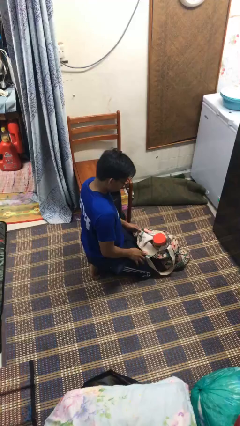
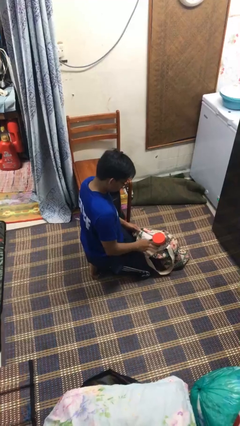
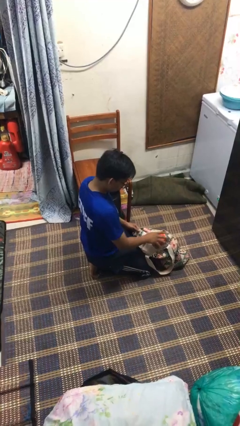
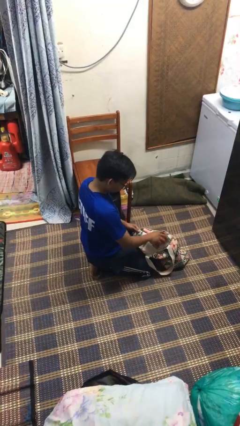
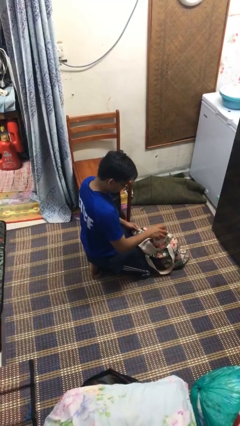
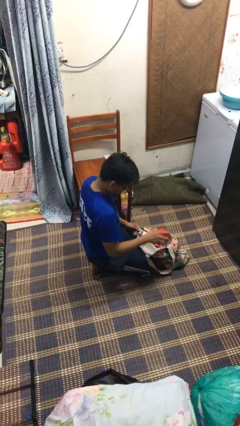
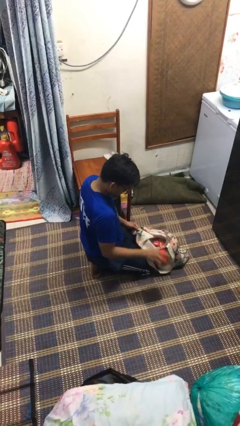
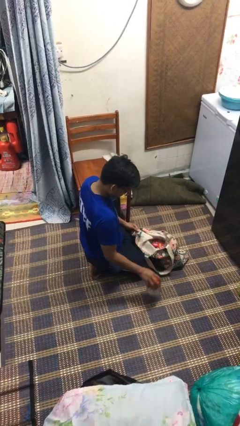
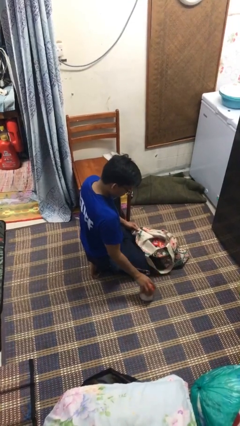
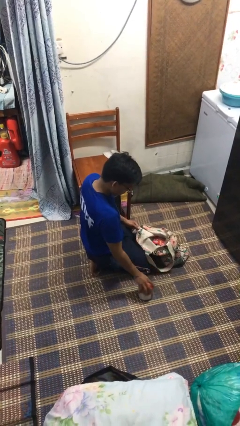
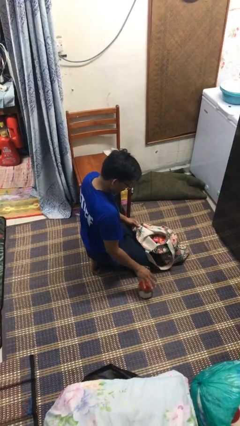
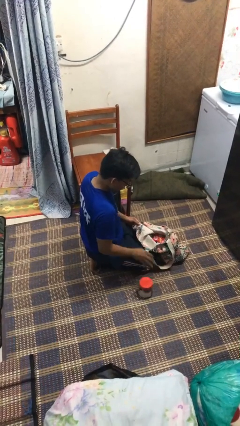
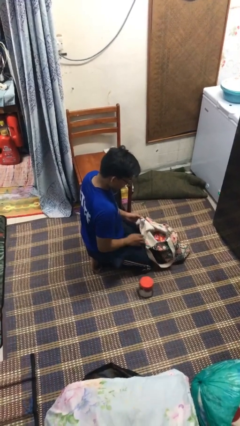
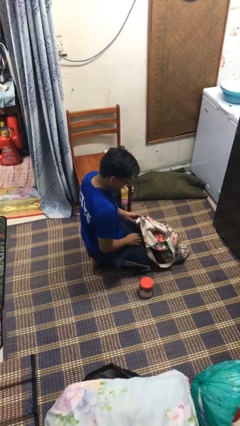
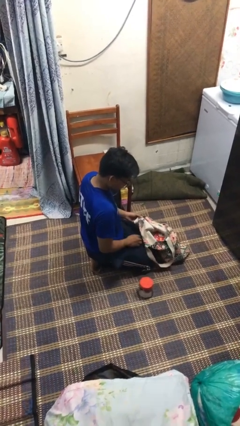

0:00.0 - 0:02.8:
person takes object from bag

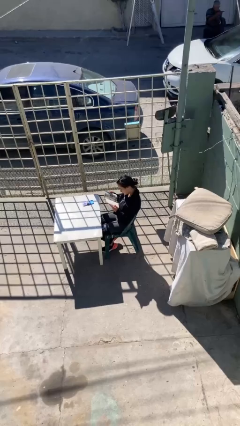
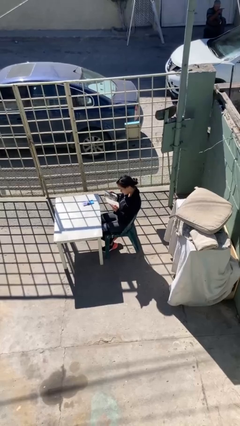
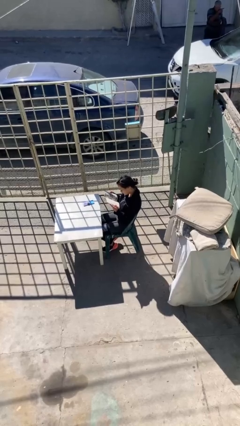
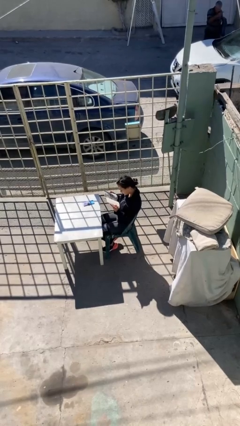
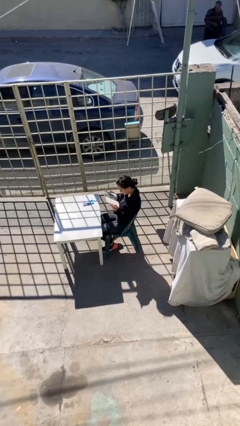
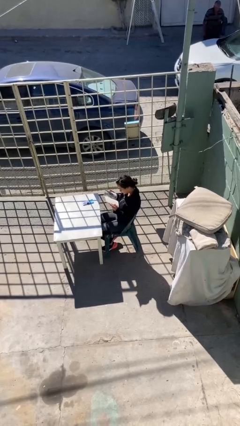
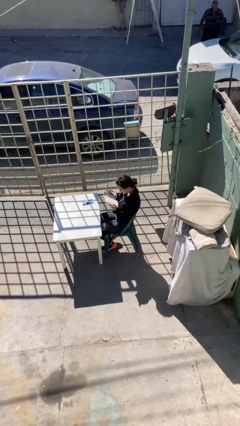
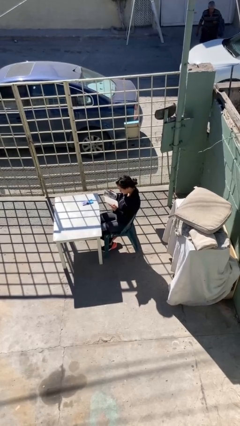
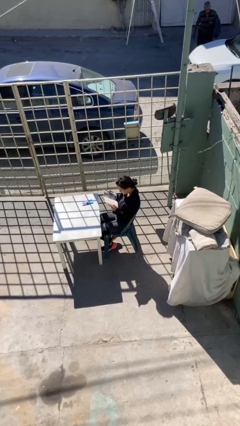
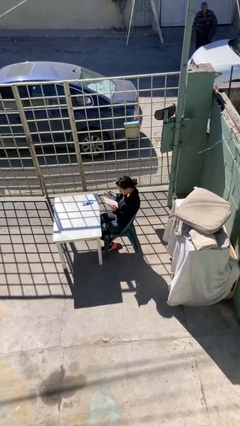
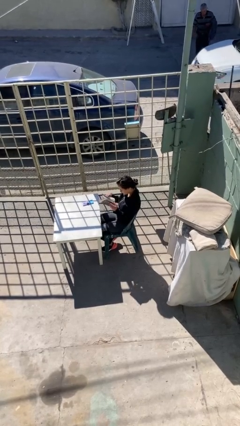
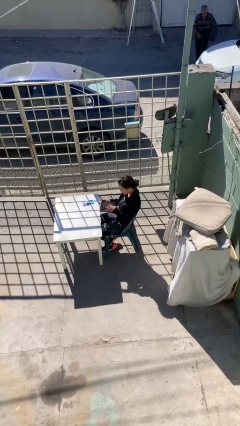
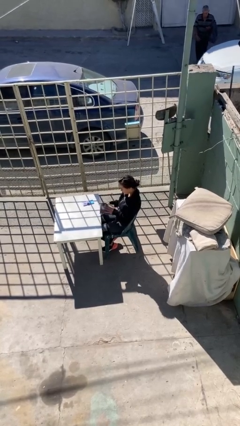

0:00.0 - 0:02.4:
person reads document

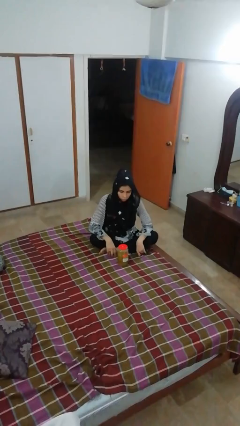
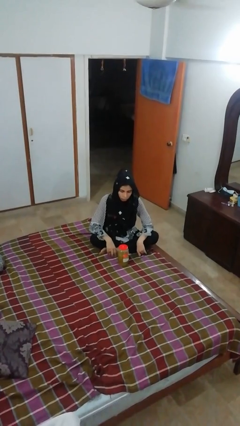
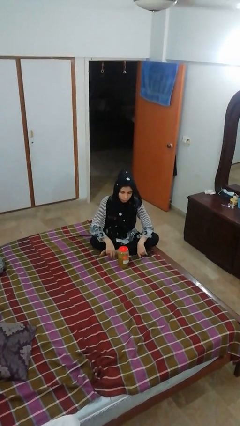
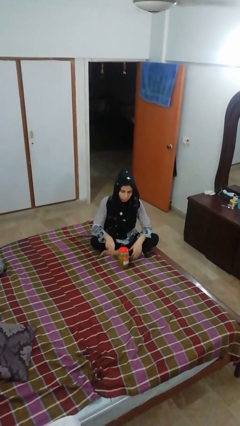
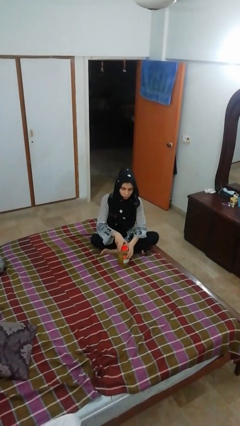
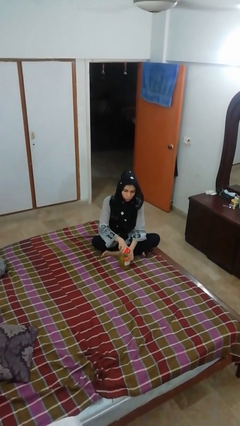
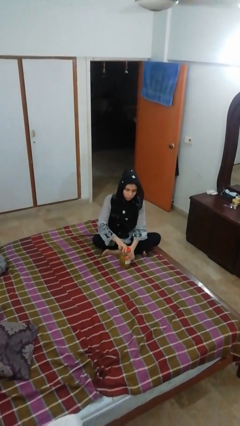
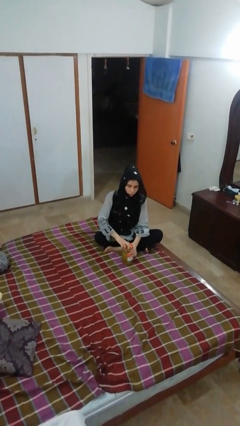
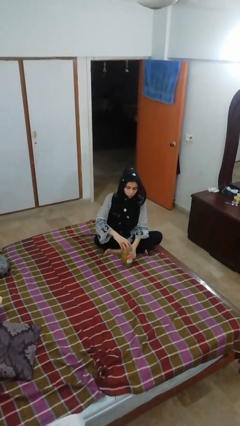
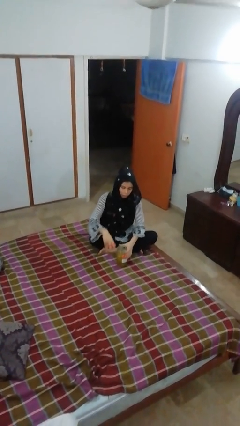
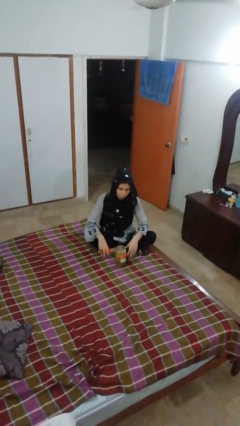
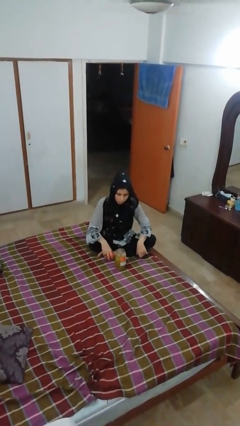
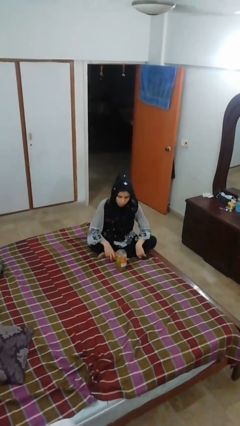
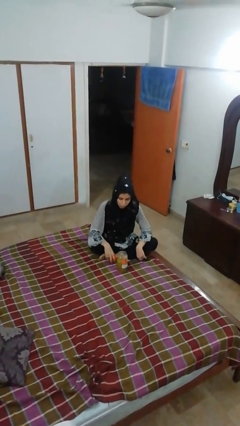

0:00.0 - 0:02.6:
person opens jar

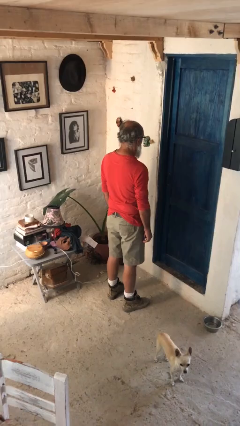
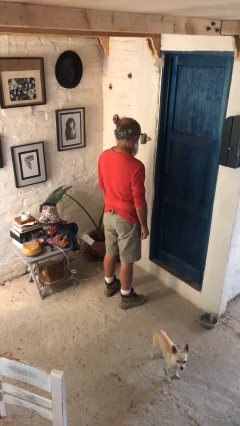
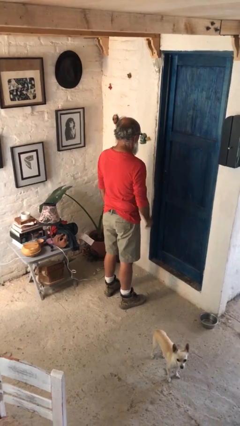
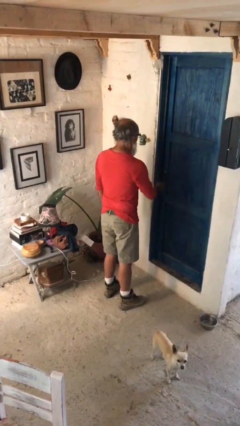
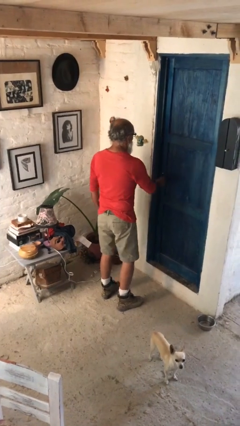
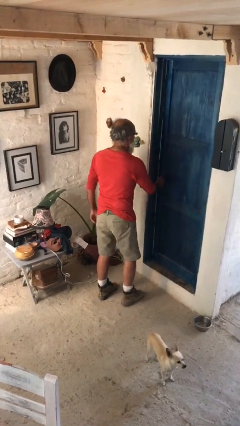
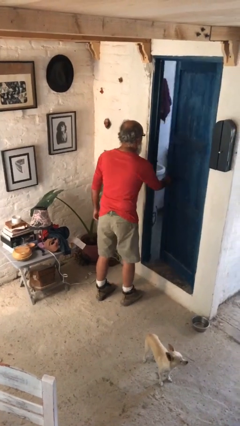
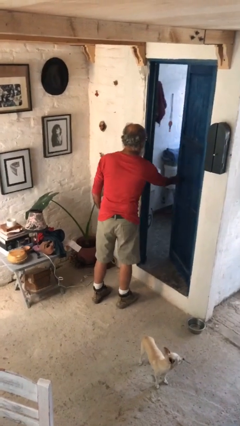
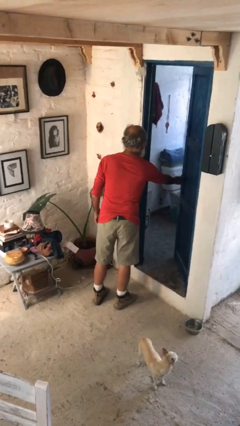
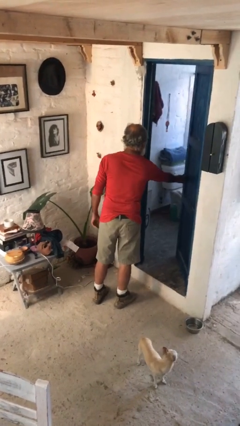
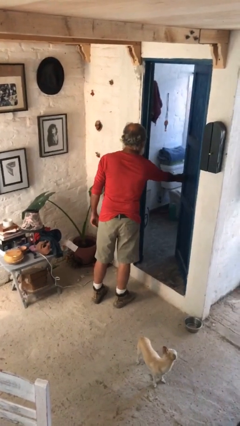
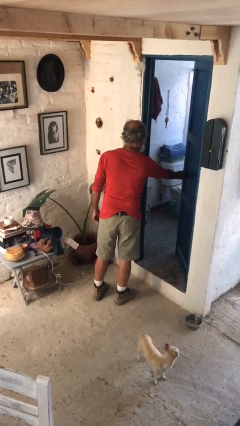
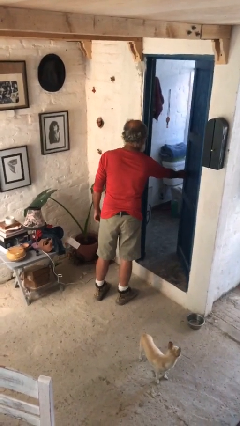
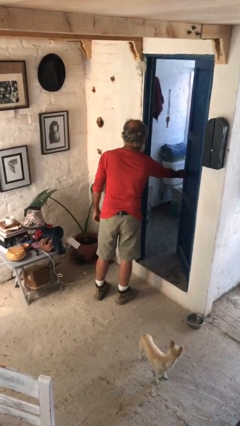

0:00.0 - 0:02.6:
person opens facility door

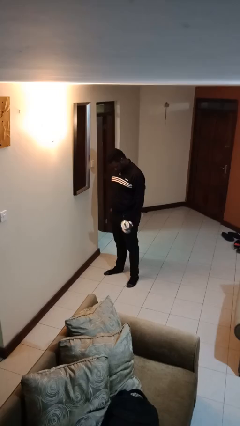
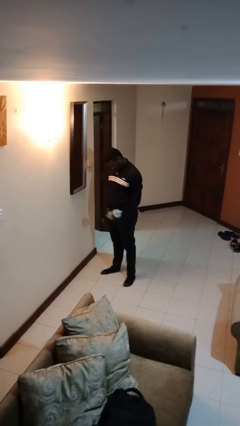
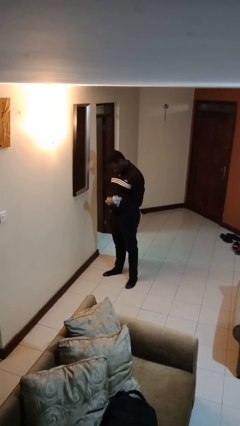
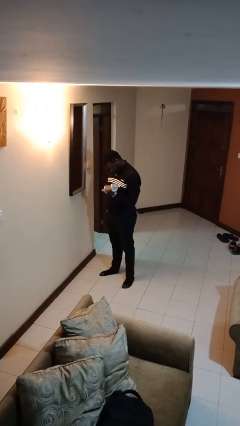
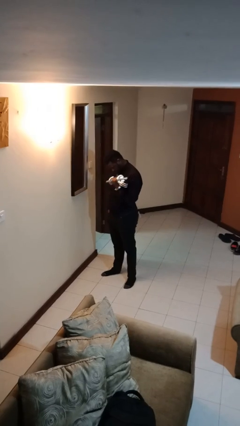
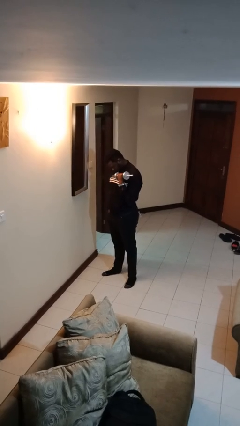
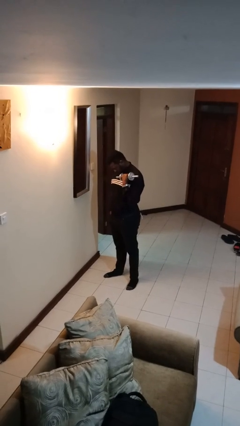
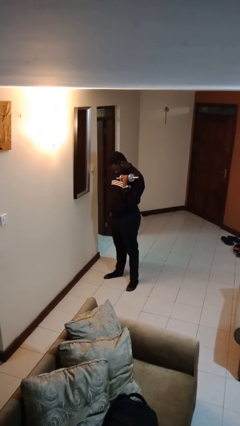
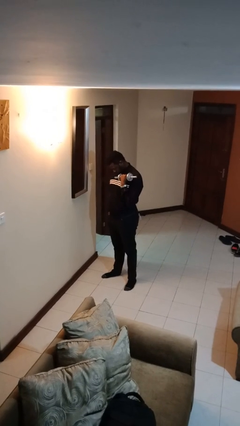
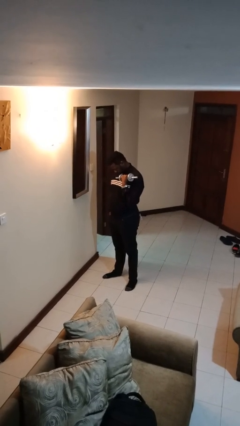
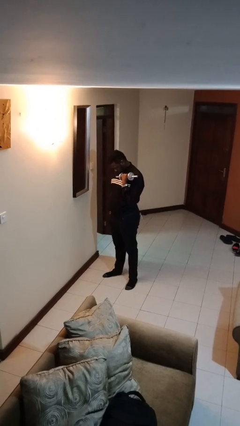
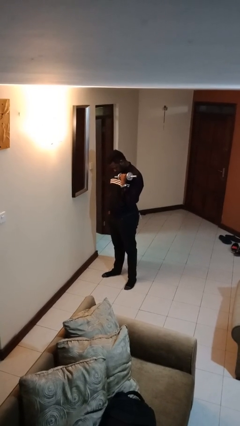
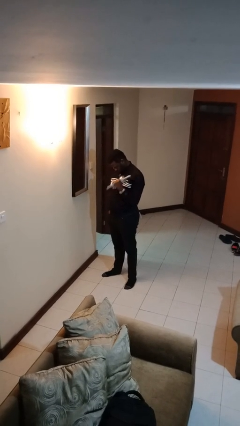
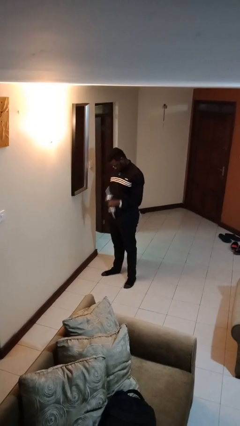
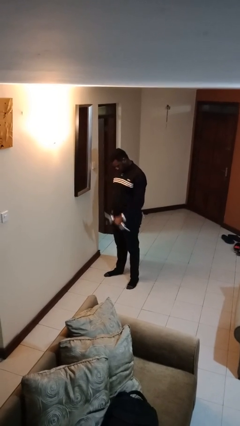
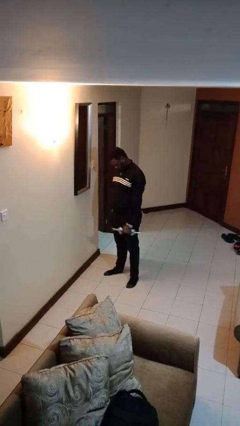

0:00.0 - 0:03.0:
person lifts dumbbells

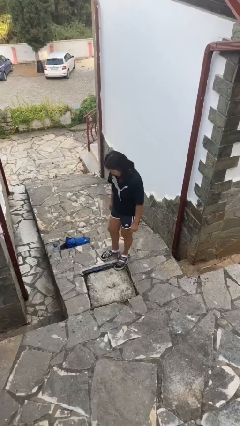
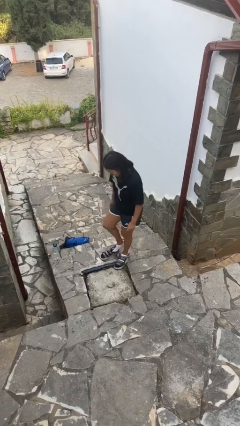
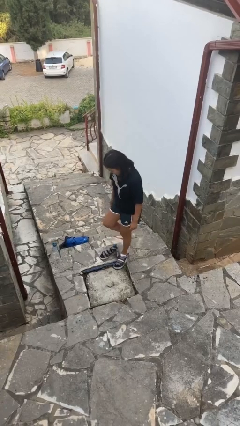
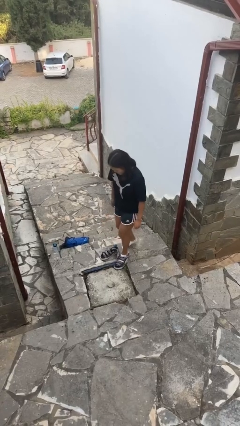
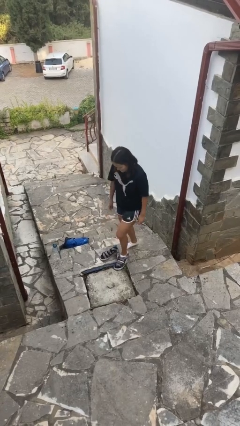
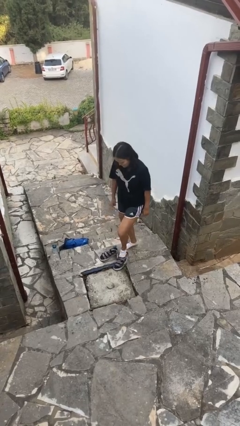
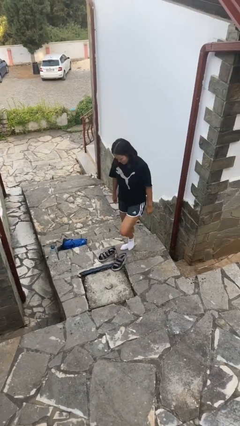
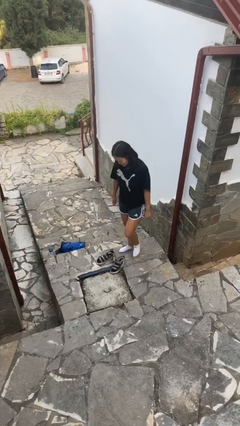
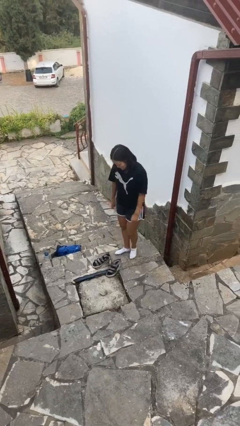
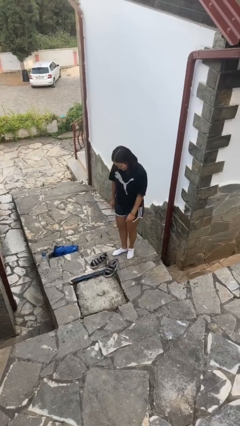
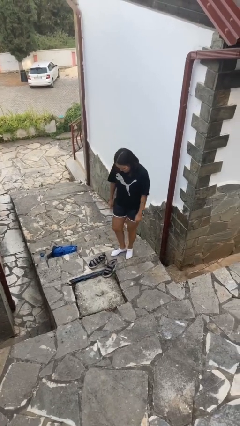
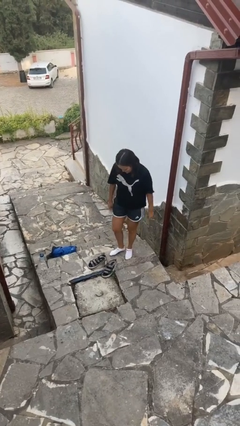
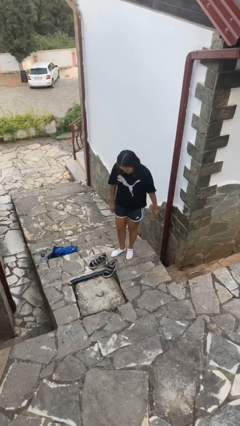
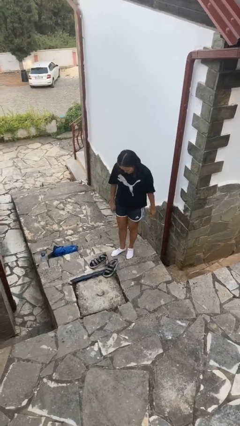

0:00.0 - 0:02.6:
person takes off shoes

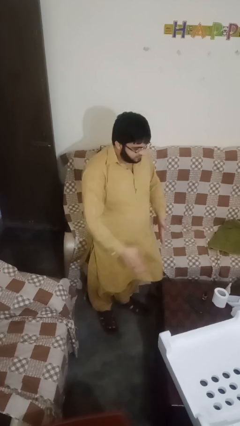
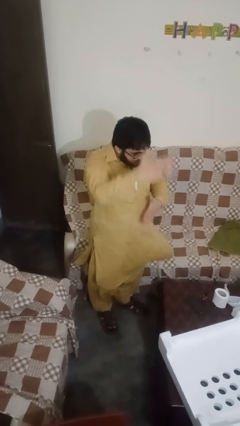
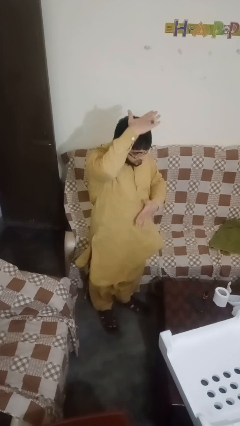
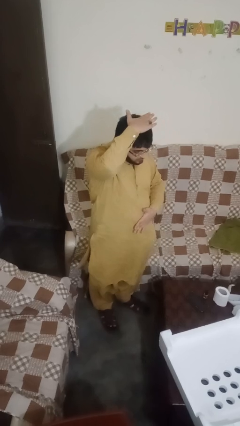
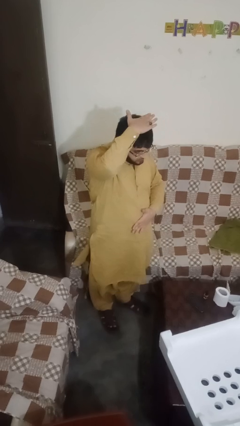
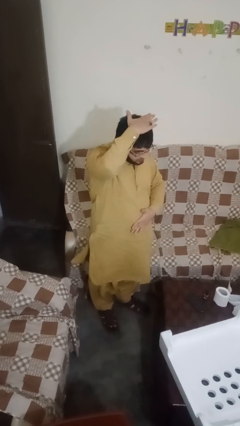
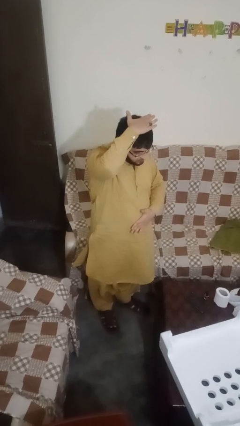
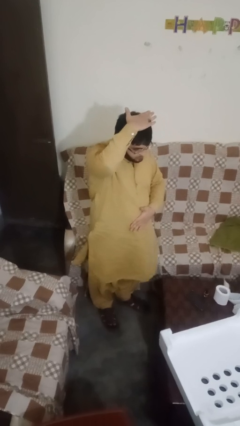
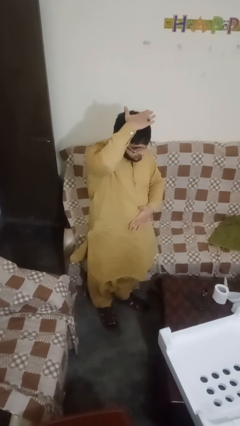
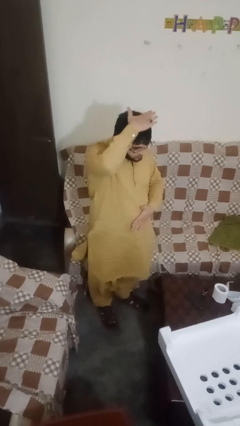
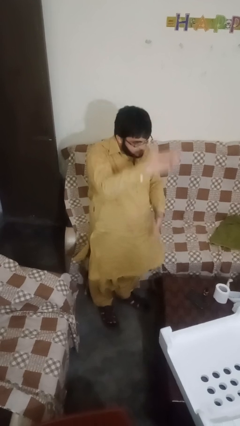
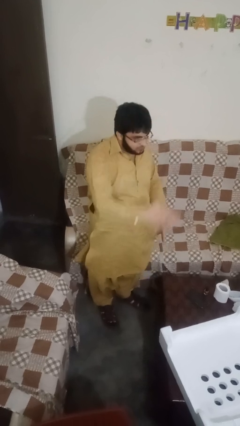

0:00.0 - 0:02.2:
person pats head
